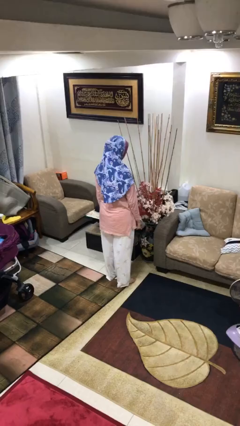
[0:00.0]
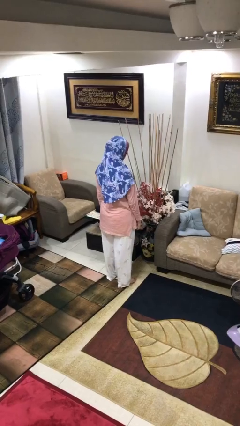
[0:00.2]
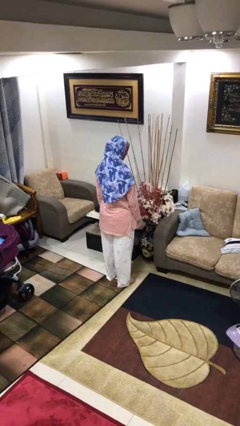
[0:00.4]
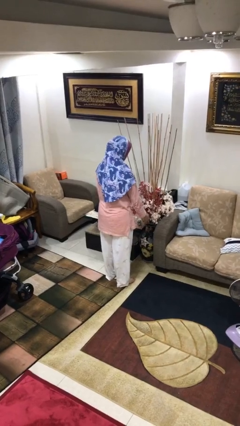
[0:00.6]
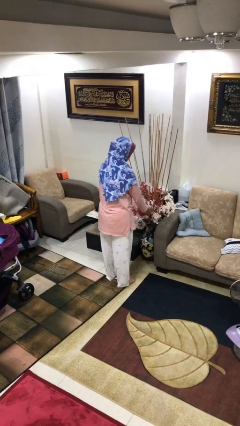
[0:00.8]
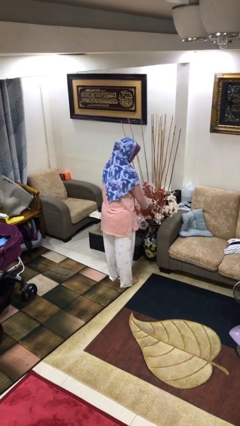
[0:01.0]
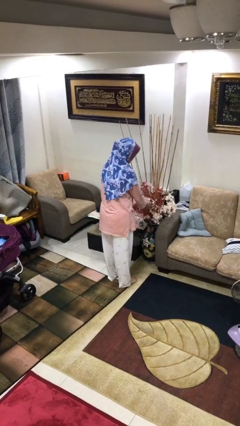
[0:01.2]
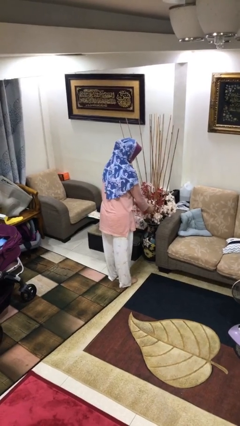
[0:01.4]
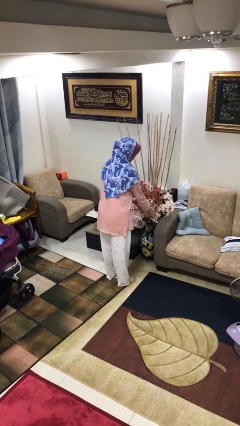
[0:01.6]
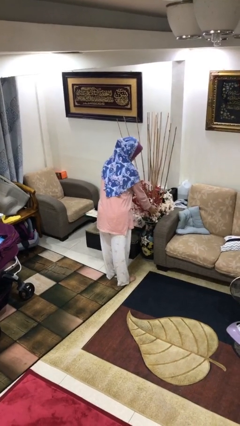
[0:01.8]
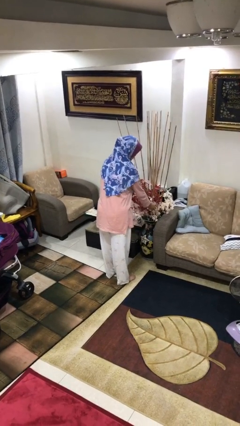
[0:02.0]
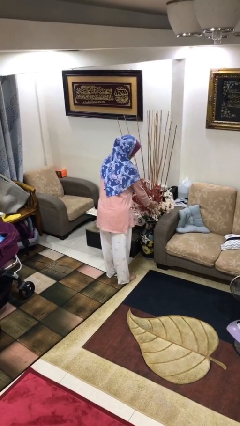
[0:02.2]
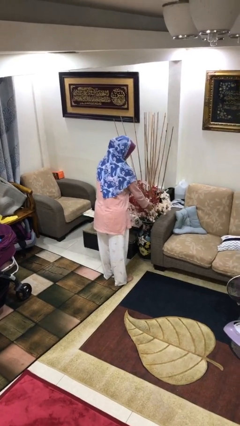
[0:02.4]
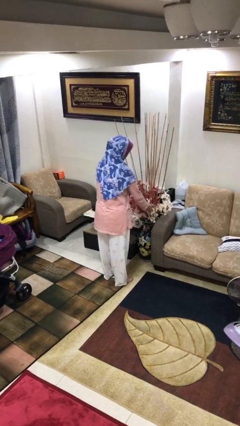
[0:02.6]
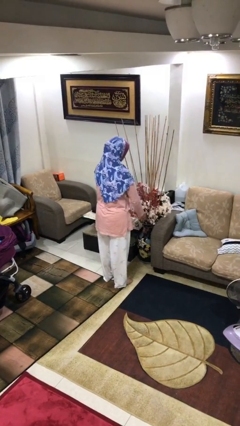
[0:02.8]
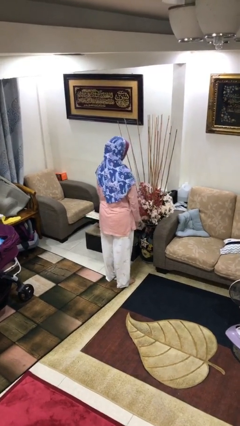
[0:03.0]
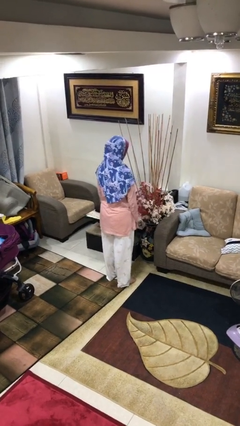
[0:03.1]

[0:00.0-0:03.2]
person arranges flowers in vase

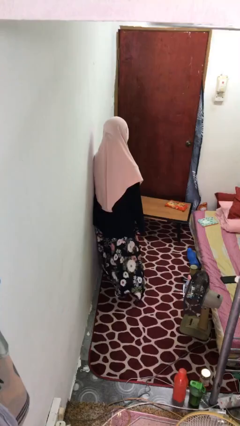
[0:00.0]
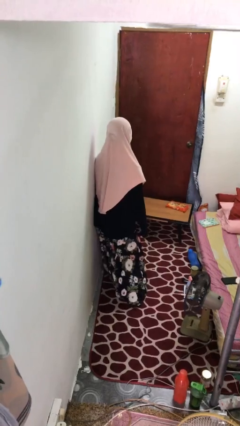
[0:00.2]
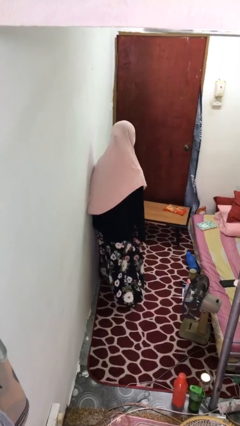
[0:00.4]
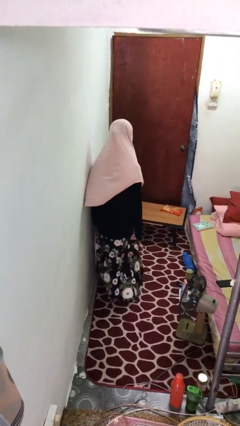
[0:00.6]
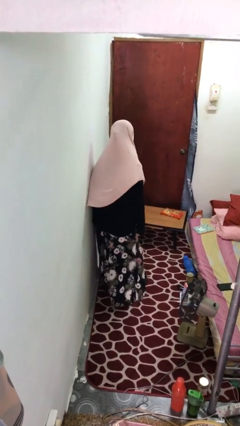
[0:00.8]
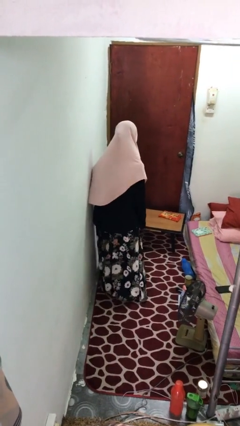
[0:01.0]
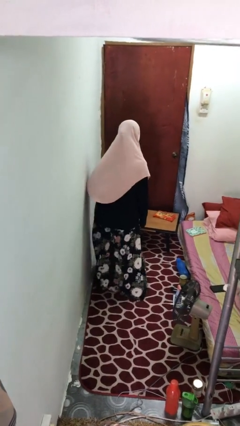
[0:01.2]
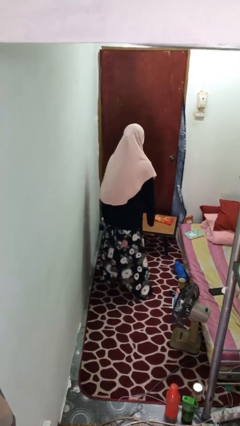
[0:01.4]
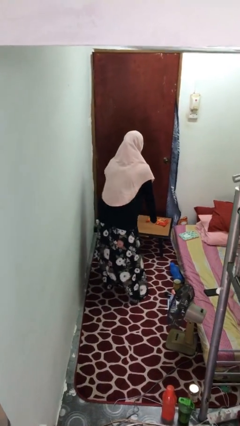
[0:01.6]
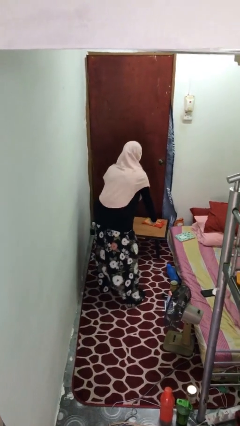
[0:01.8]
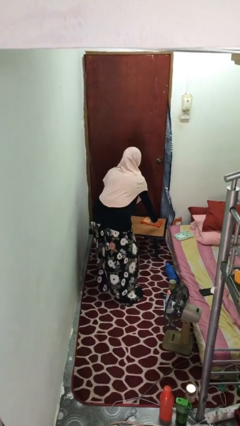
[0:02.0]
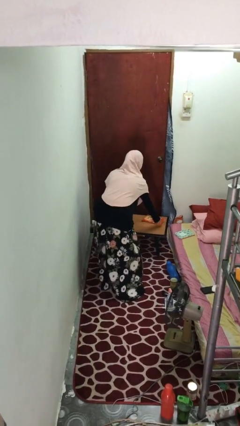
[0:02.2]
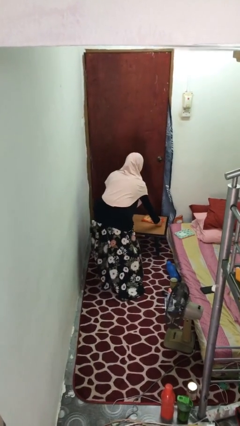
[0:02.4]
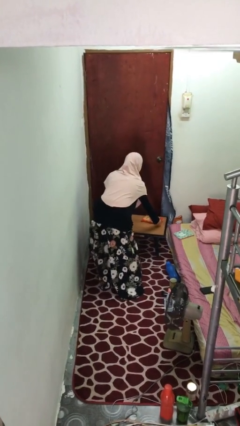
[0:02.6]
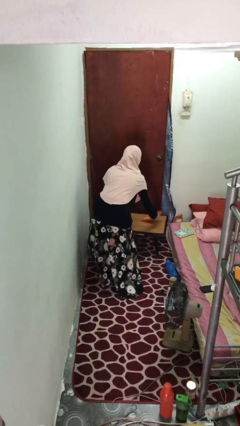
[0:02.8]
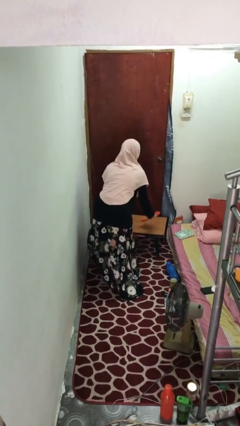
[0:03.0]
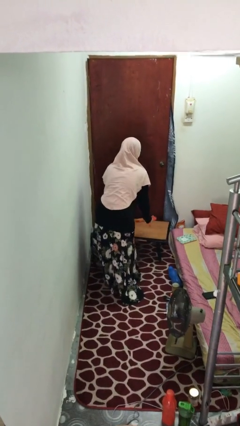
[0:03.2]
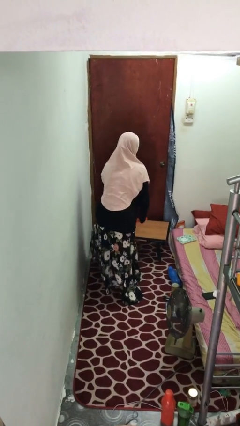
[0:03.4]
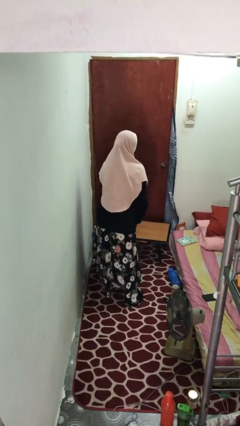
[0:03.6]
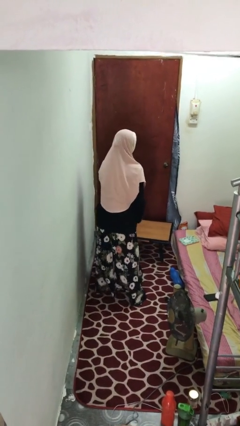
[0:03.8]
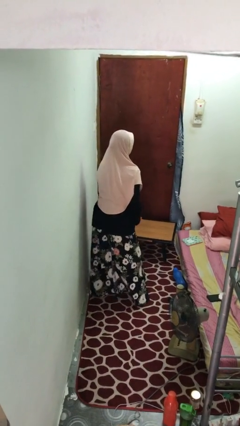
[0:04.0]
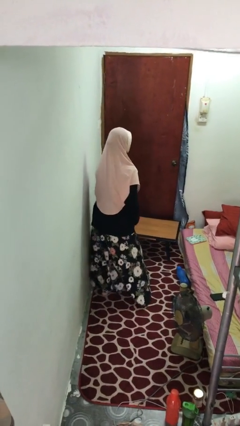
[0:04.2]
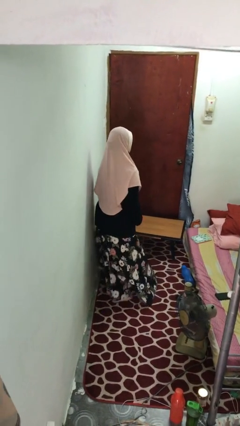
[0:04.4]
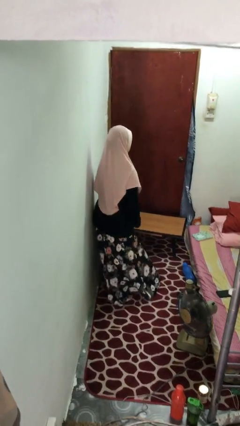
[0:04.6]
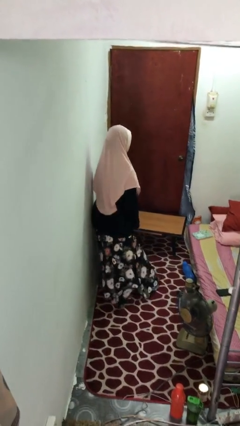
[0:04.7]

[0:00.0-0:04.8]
person picks up object from table

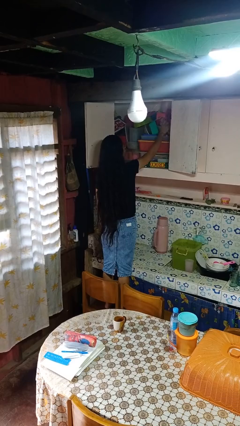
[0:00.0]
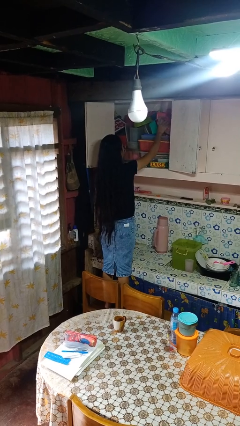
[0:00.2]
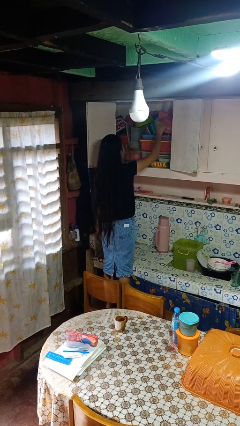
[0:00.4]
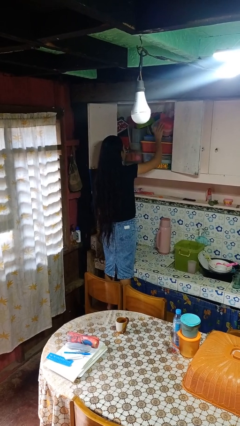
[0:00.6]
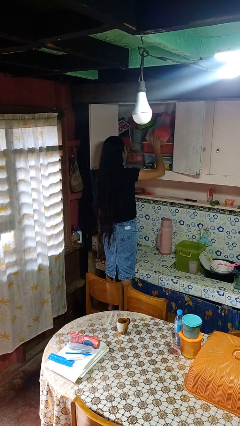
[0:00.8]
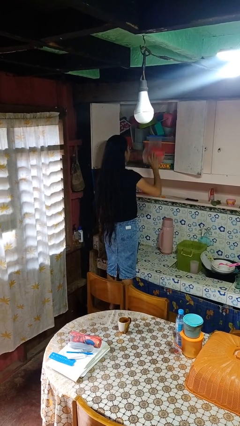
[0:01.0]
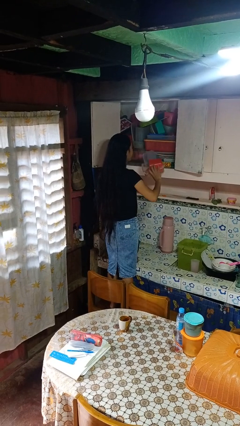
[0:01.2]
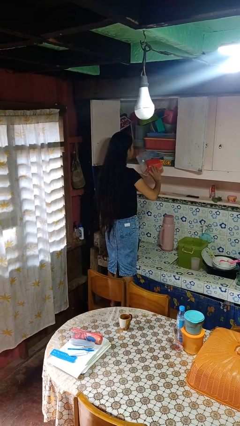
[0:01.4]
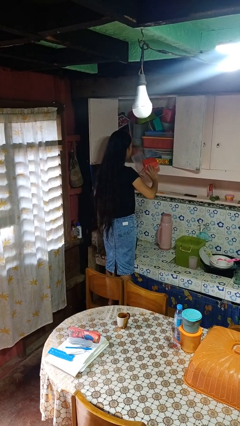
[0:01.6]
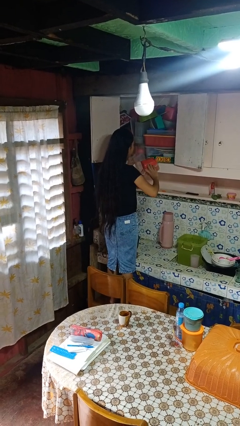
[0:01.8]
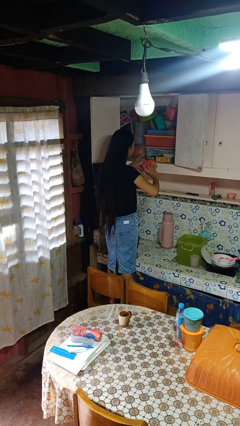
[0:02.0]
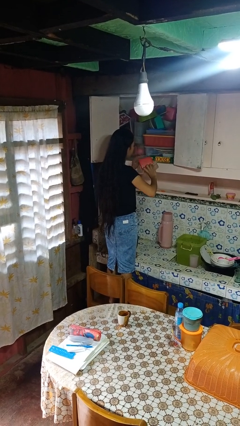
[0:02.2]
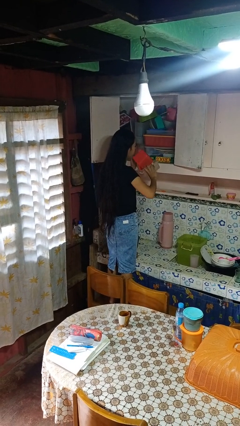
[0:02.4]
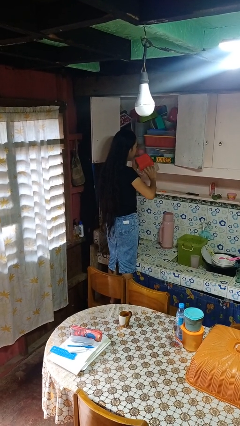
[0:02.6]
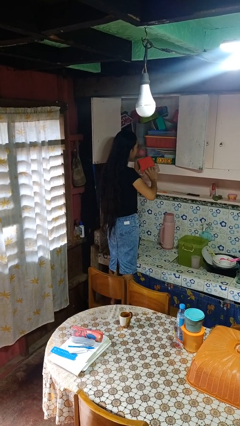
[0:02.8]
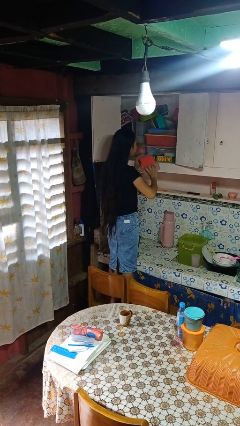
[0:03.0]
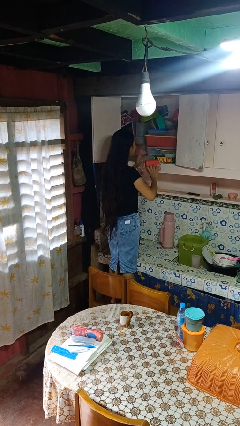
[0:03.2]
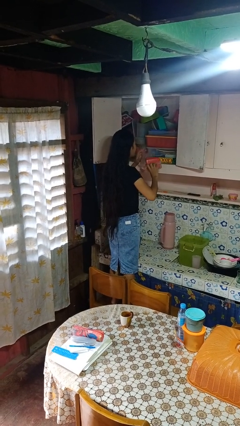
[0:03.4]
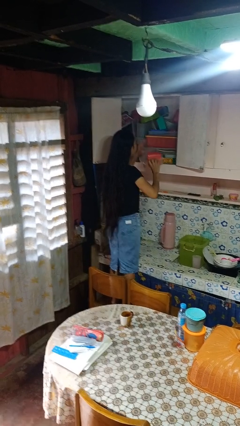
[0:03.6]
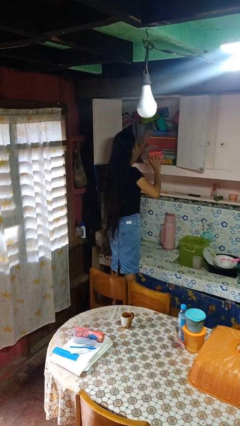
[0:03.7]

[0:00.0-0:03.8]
person takes object from cabinet

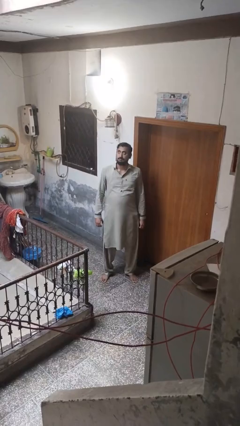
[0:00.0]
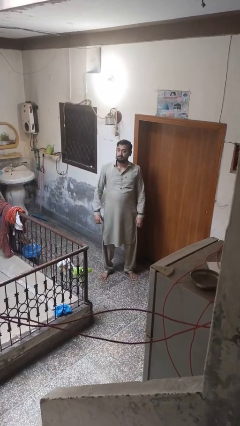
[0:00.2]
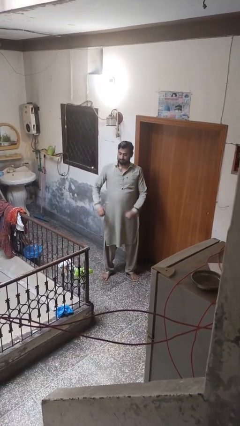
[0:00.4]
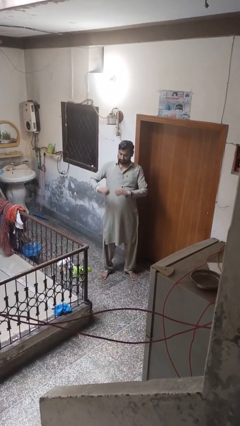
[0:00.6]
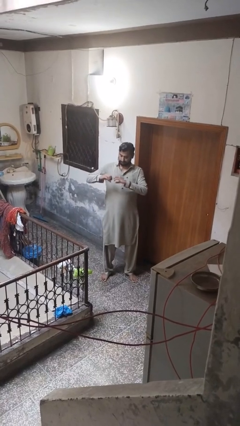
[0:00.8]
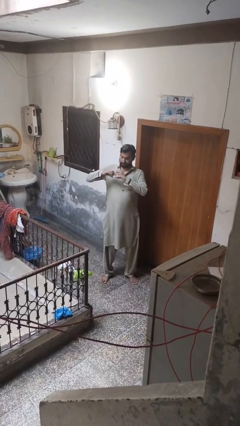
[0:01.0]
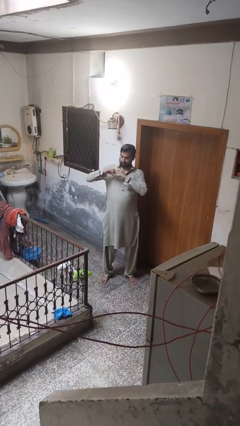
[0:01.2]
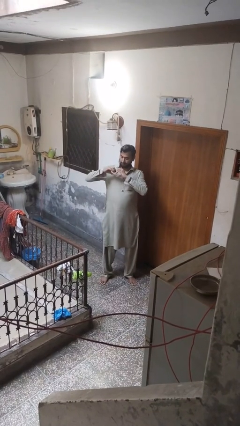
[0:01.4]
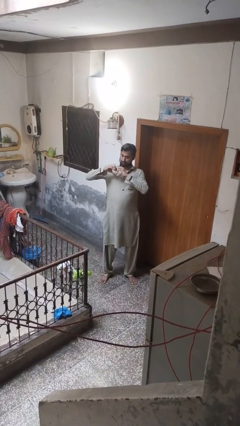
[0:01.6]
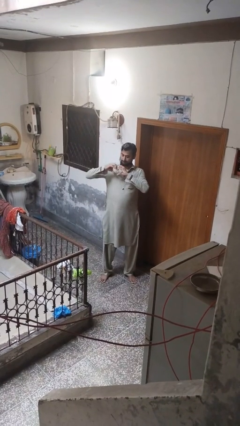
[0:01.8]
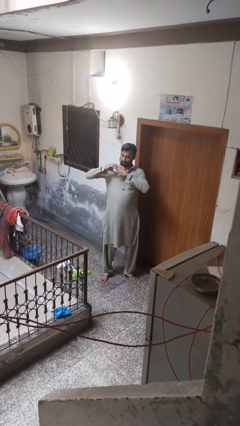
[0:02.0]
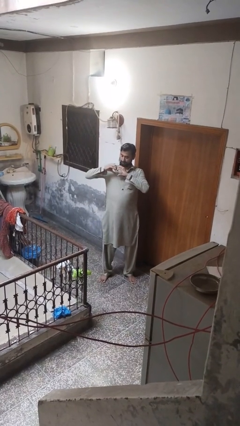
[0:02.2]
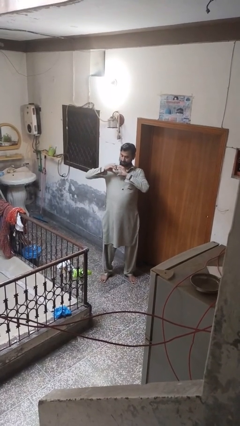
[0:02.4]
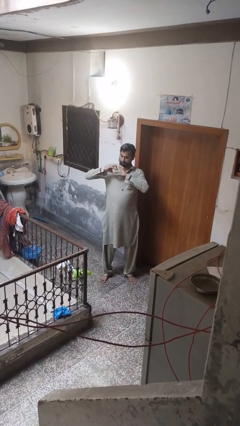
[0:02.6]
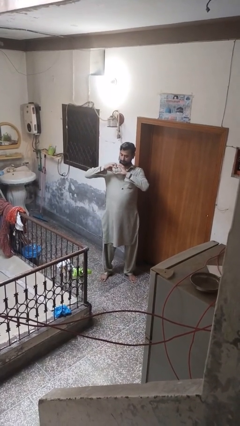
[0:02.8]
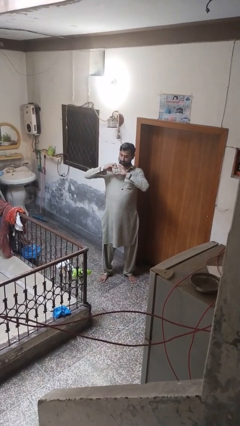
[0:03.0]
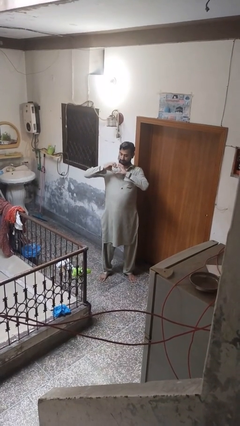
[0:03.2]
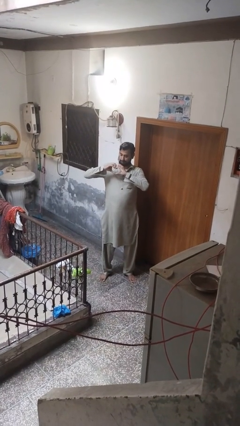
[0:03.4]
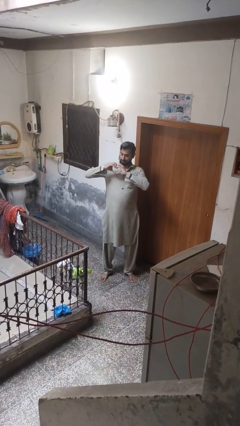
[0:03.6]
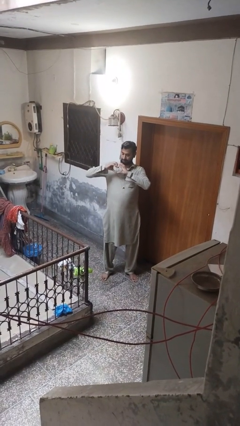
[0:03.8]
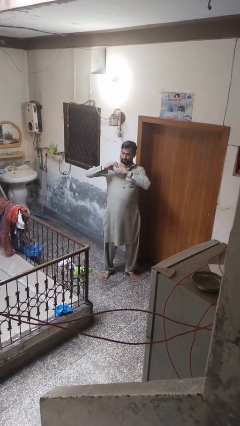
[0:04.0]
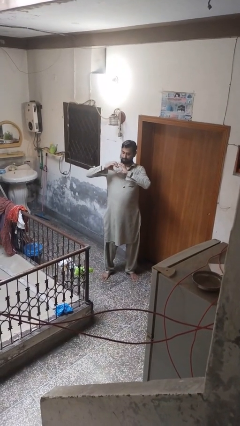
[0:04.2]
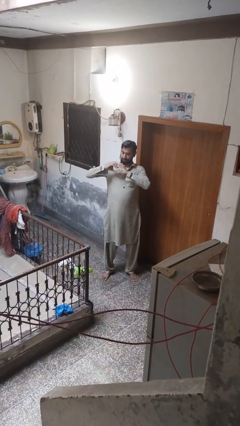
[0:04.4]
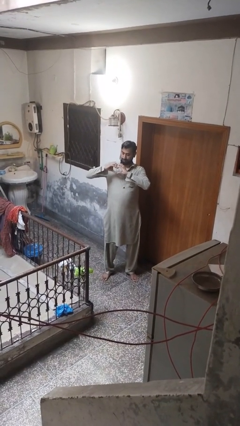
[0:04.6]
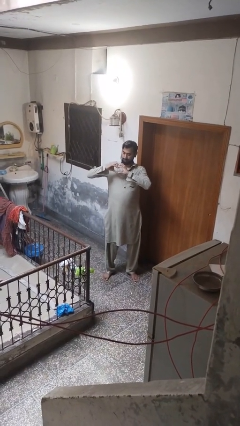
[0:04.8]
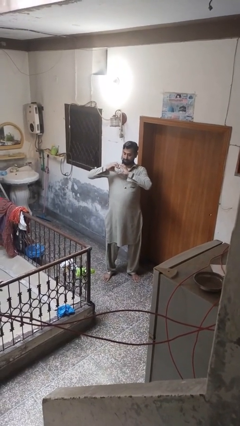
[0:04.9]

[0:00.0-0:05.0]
person gestures heart

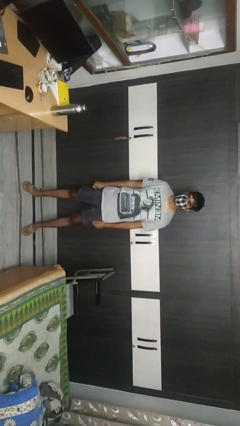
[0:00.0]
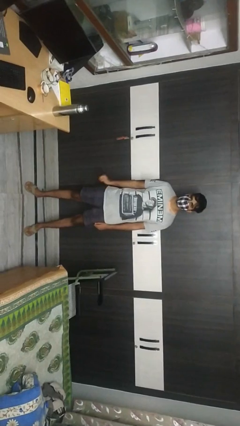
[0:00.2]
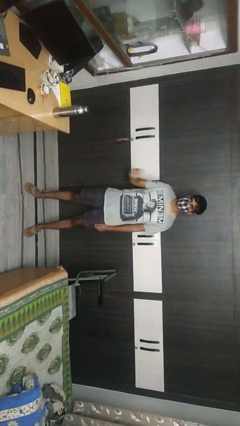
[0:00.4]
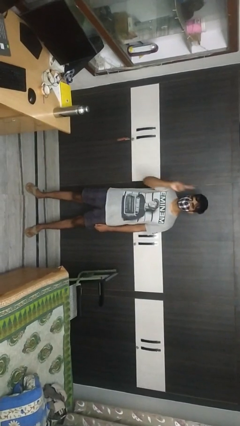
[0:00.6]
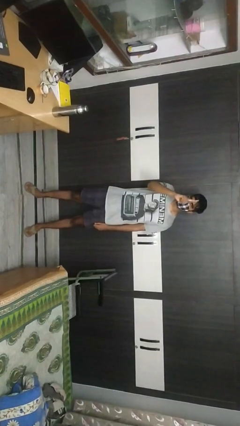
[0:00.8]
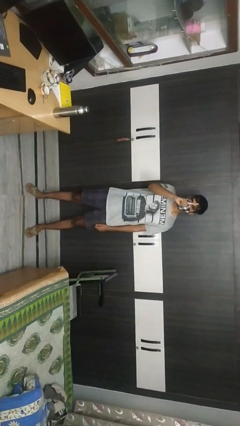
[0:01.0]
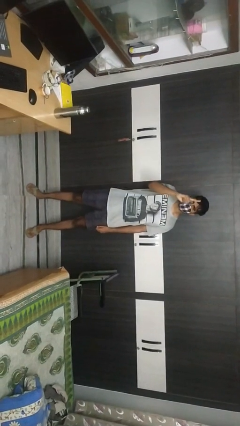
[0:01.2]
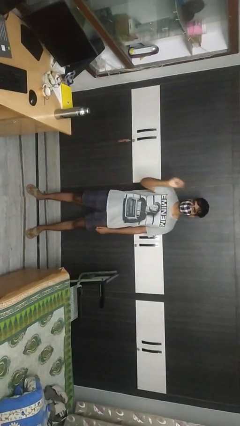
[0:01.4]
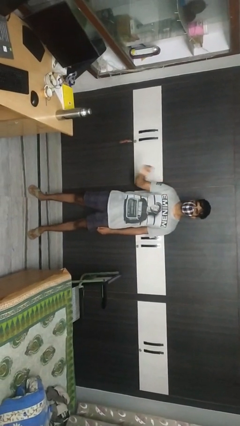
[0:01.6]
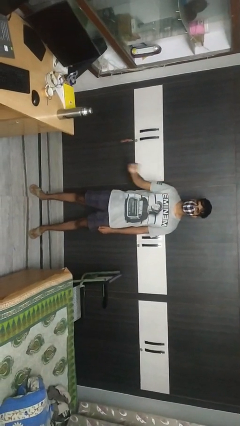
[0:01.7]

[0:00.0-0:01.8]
person gestures number one
